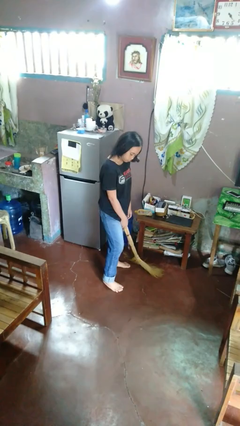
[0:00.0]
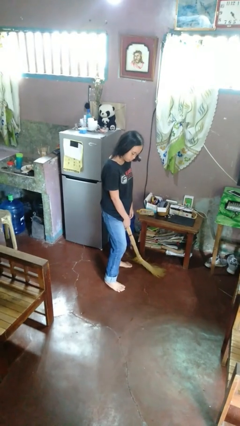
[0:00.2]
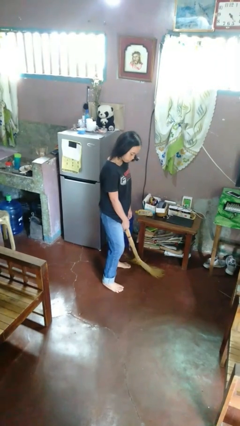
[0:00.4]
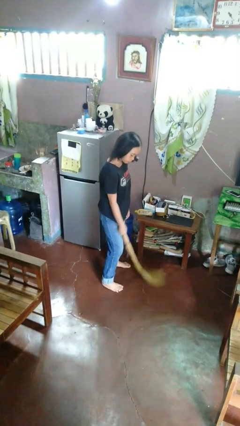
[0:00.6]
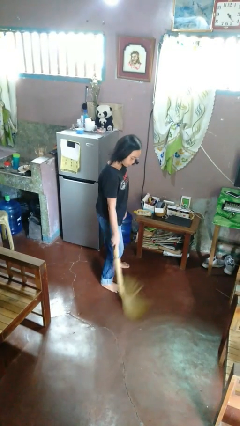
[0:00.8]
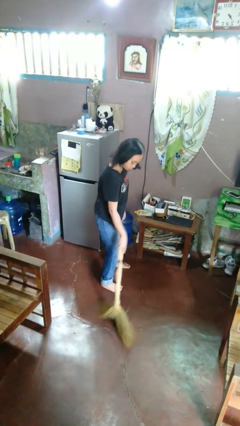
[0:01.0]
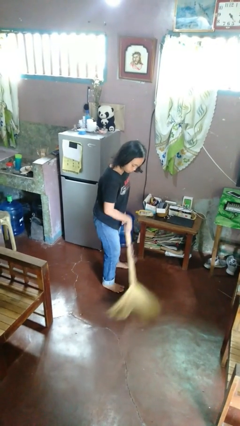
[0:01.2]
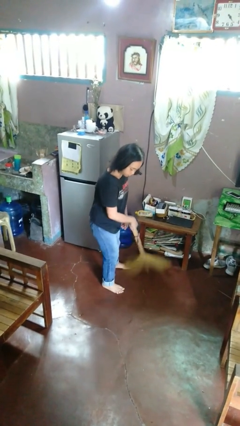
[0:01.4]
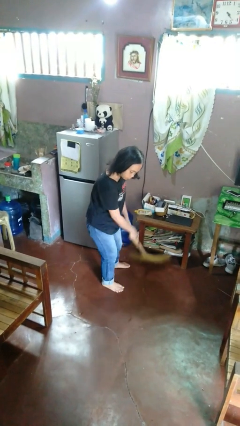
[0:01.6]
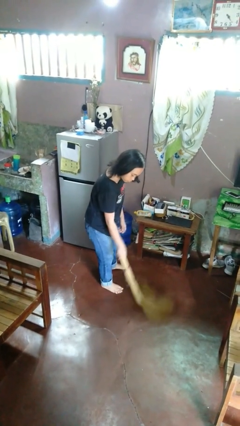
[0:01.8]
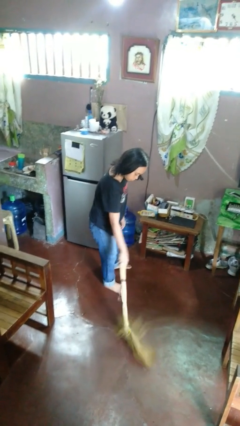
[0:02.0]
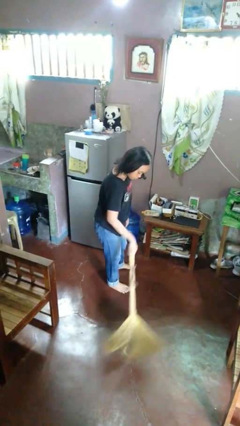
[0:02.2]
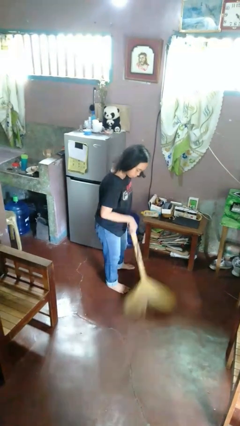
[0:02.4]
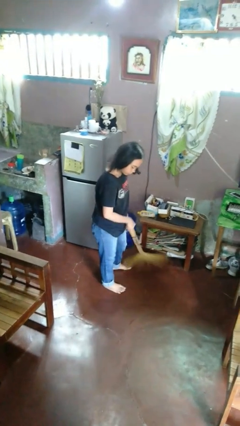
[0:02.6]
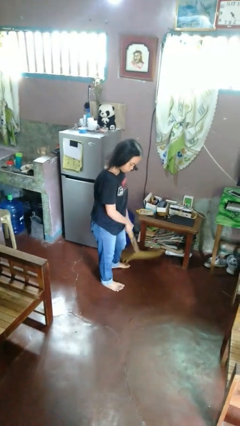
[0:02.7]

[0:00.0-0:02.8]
person sweeps floor

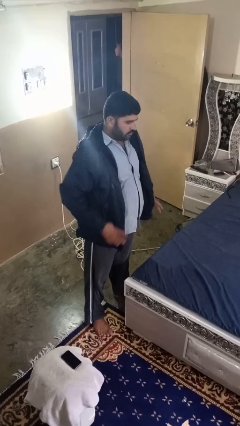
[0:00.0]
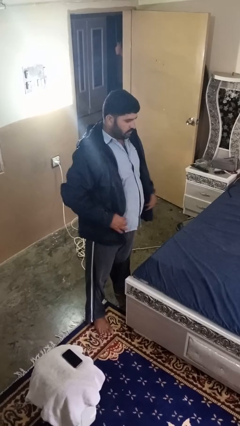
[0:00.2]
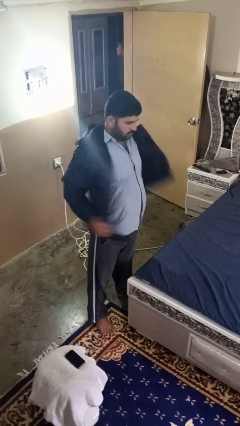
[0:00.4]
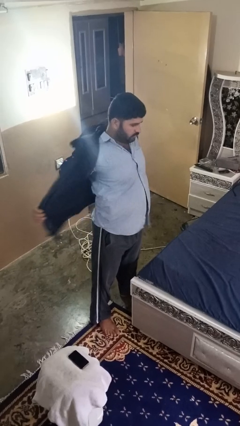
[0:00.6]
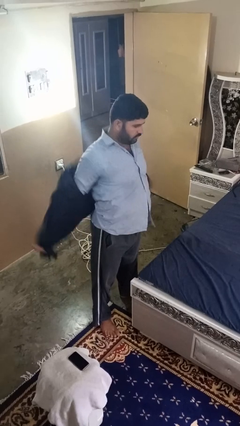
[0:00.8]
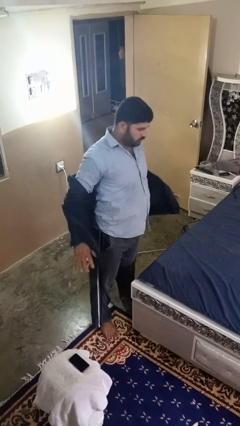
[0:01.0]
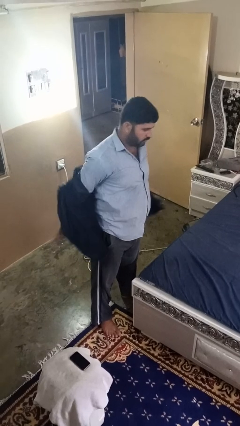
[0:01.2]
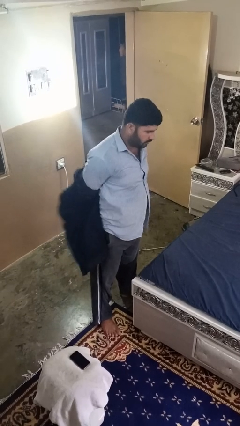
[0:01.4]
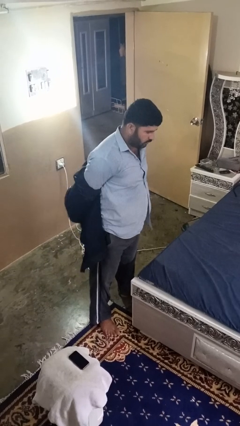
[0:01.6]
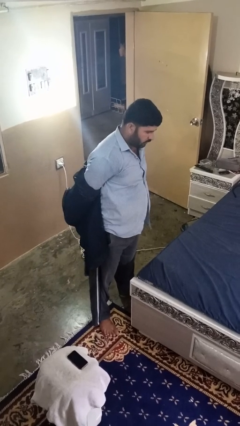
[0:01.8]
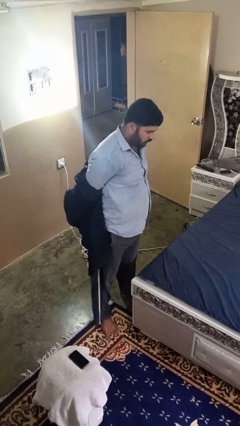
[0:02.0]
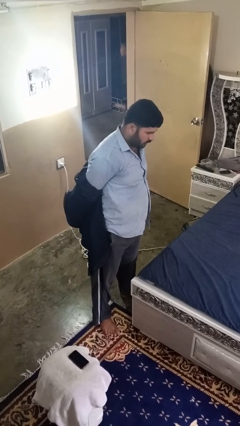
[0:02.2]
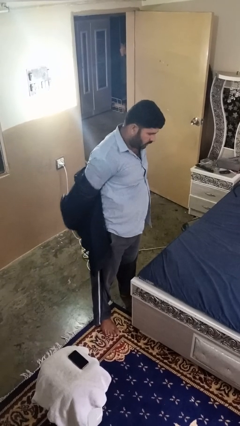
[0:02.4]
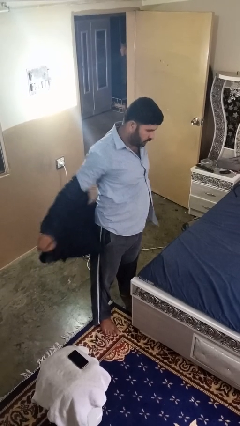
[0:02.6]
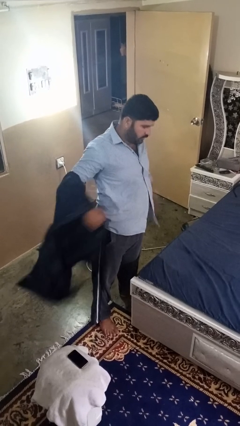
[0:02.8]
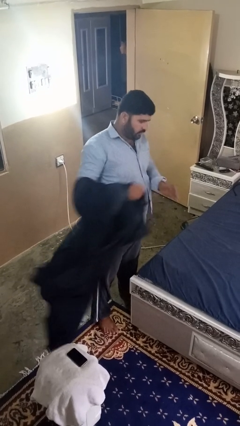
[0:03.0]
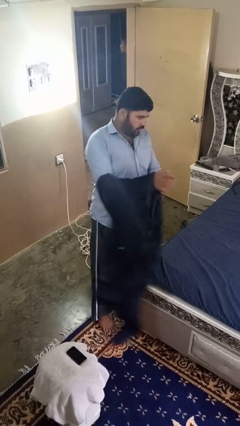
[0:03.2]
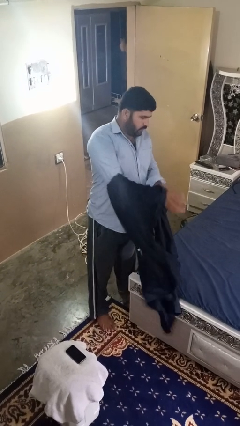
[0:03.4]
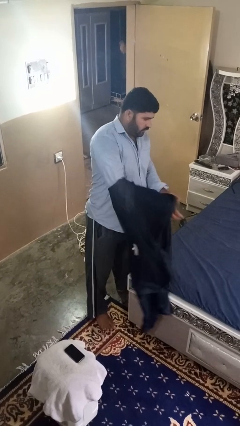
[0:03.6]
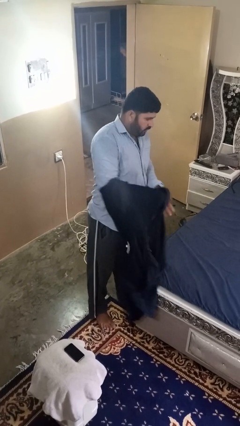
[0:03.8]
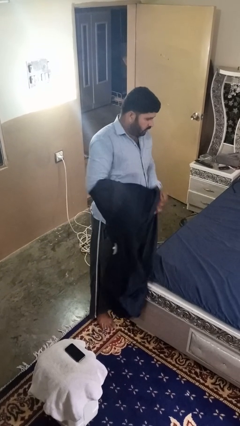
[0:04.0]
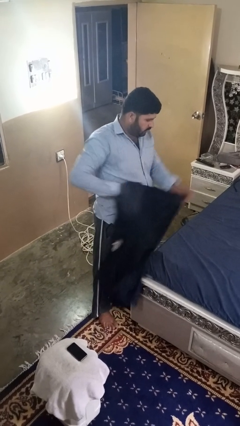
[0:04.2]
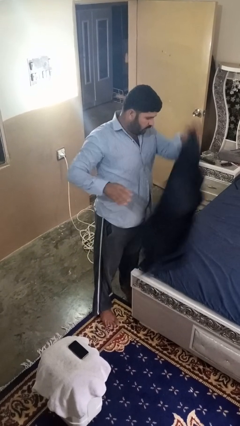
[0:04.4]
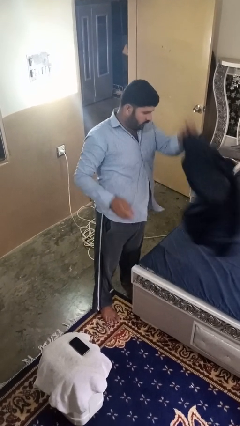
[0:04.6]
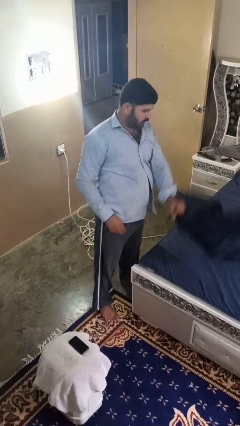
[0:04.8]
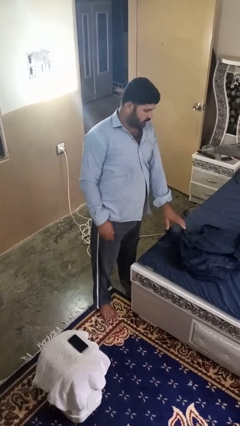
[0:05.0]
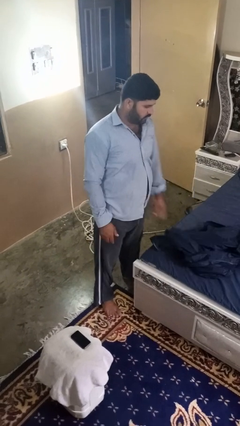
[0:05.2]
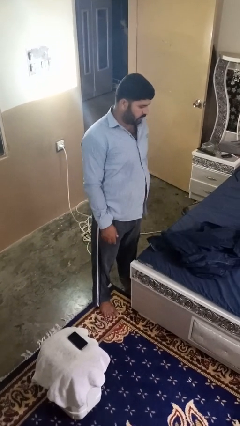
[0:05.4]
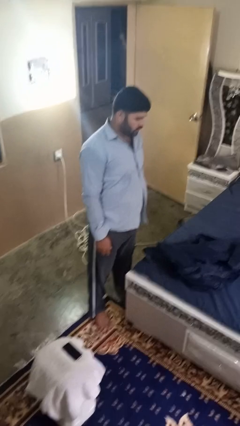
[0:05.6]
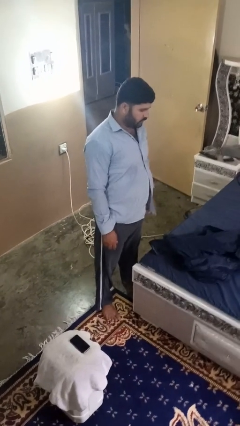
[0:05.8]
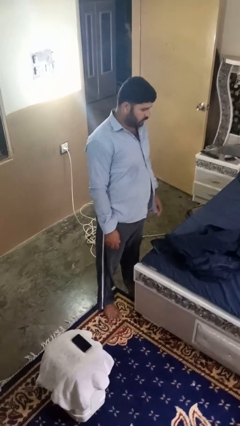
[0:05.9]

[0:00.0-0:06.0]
person takes off jacket

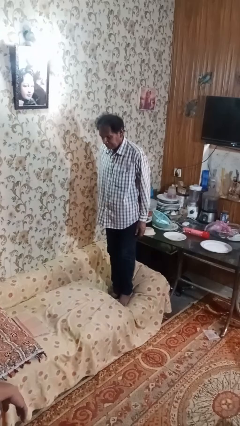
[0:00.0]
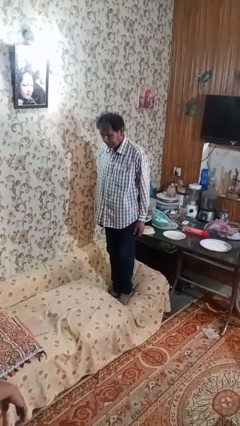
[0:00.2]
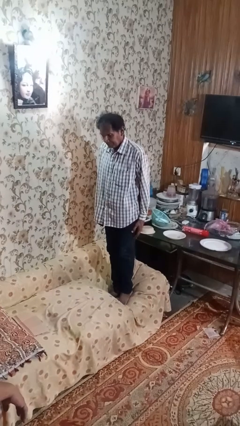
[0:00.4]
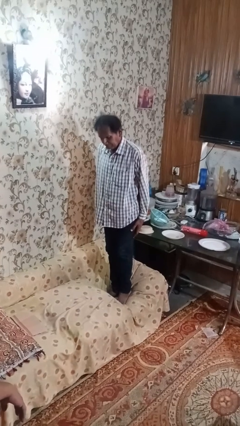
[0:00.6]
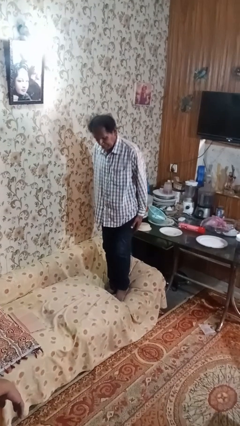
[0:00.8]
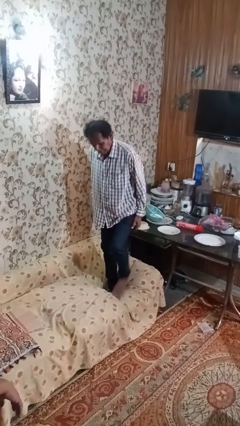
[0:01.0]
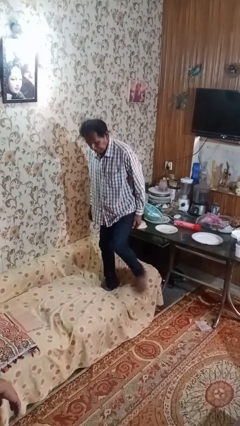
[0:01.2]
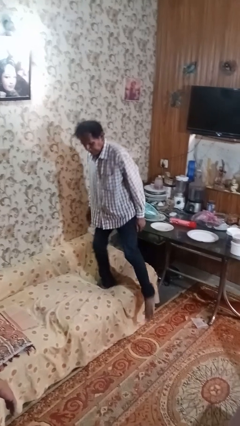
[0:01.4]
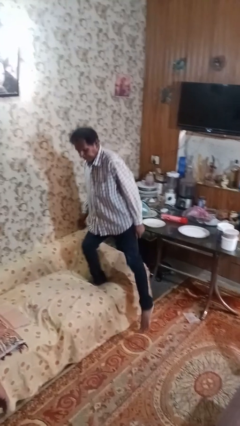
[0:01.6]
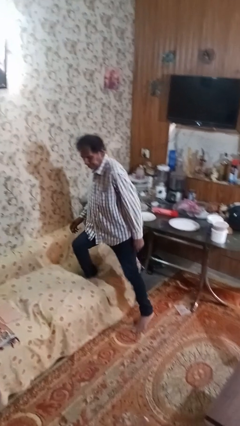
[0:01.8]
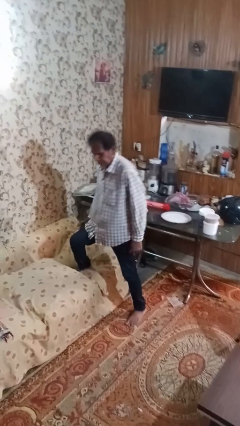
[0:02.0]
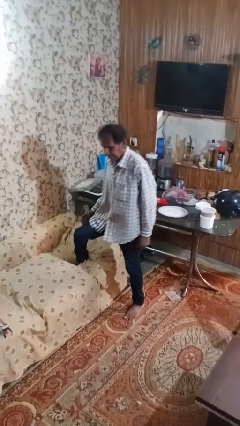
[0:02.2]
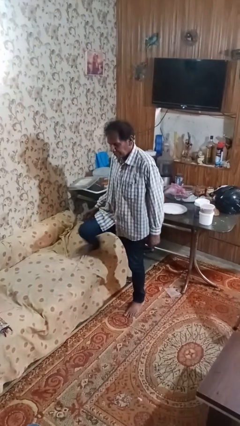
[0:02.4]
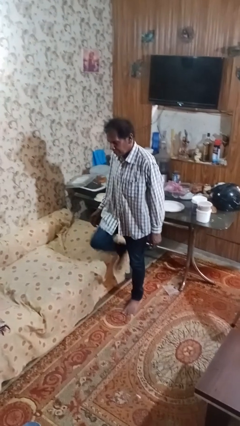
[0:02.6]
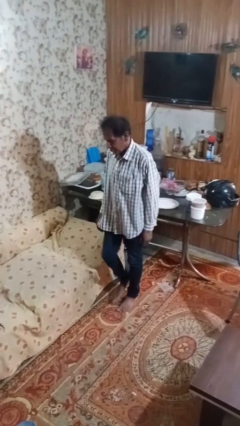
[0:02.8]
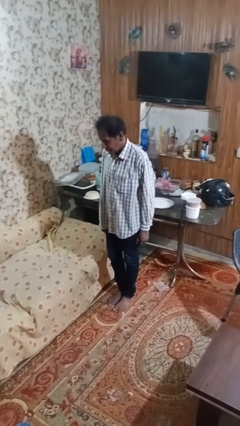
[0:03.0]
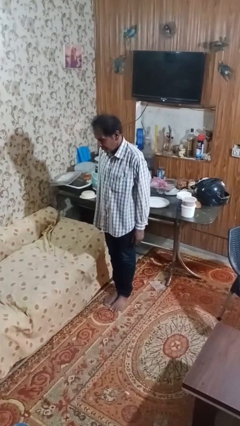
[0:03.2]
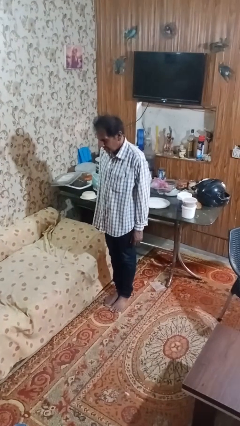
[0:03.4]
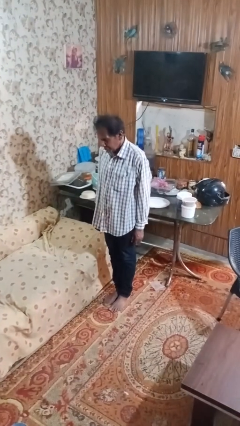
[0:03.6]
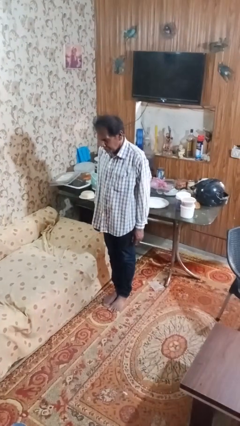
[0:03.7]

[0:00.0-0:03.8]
person climbs off couch

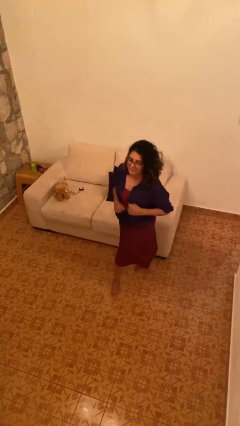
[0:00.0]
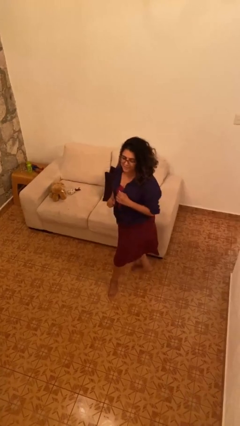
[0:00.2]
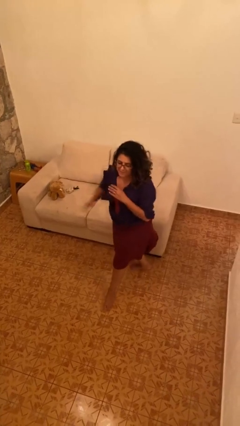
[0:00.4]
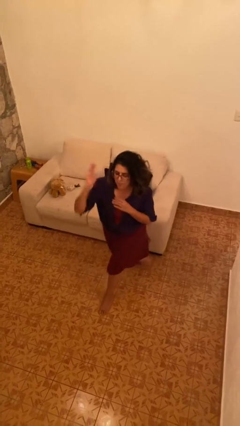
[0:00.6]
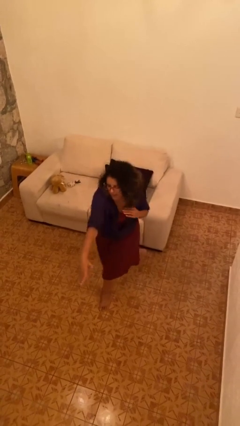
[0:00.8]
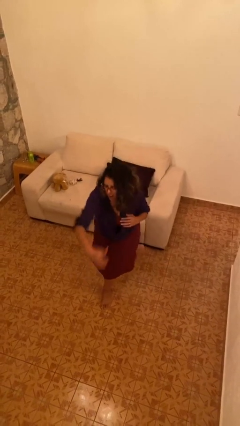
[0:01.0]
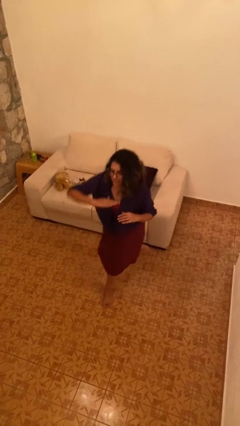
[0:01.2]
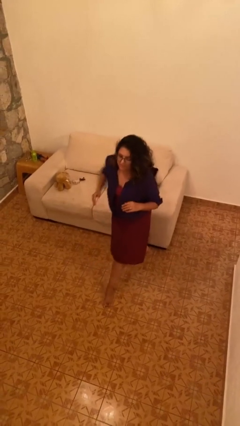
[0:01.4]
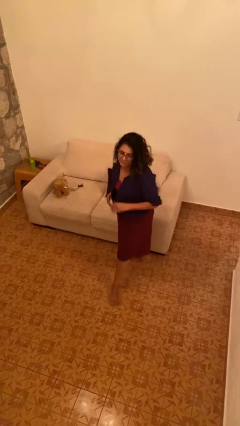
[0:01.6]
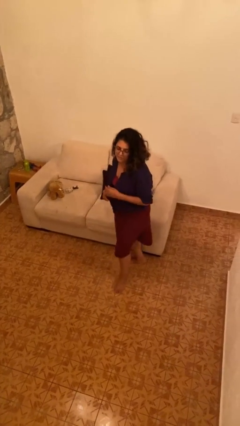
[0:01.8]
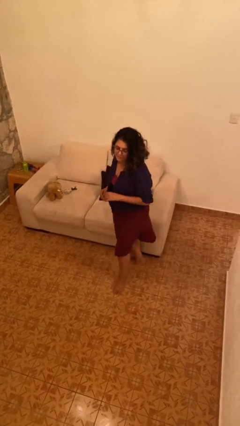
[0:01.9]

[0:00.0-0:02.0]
person karate chop

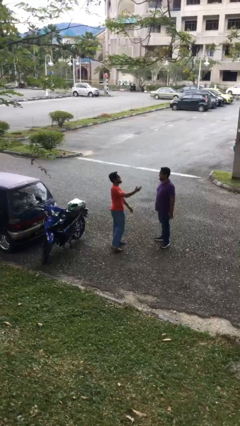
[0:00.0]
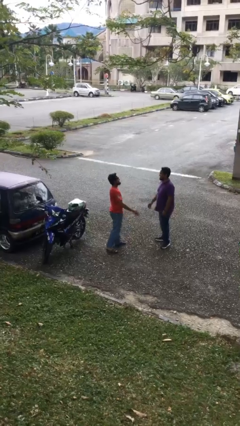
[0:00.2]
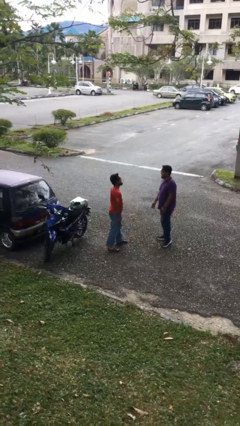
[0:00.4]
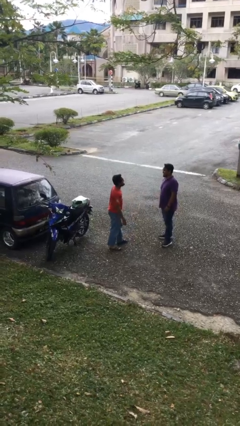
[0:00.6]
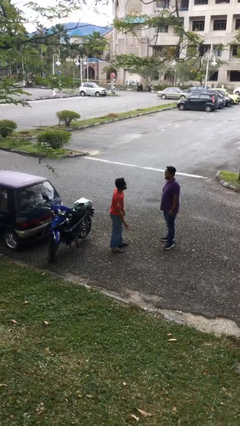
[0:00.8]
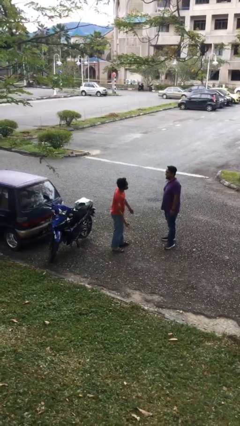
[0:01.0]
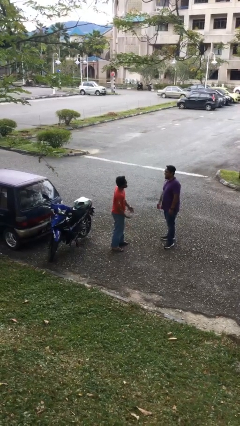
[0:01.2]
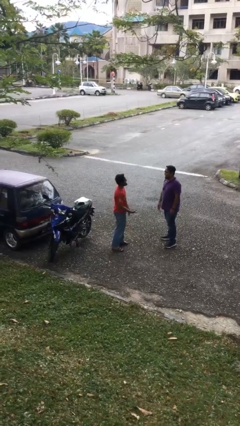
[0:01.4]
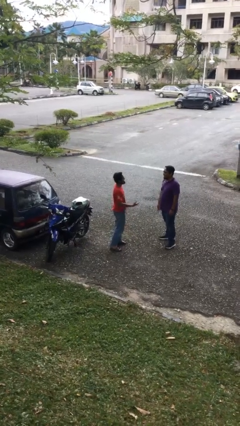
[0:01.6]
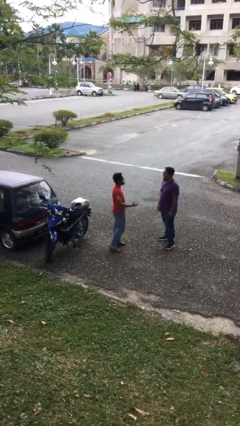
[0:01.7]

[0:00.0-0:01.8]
person talks to person

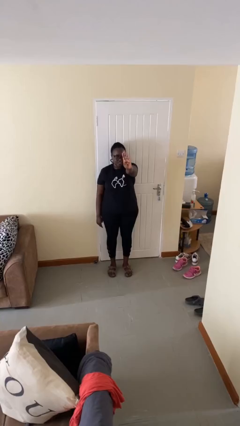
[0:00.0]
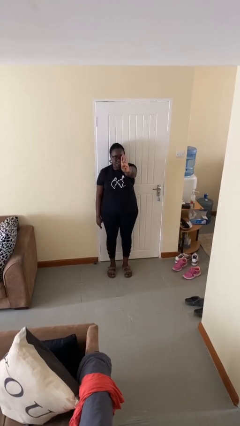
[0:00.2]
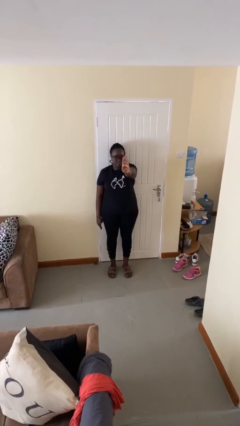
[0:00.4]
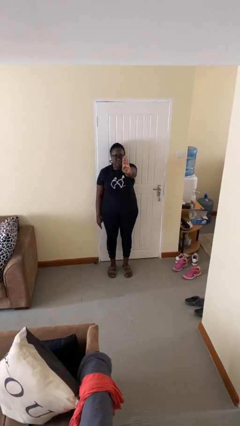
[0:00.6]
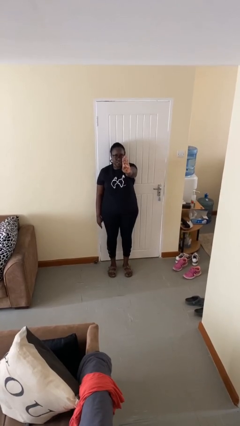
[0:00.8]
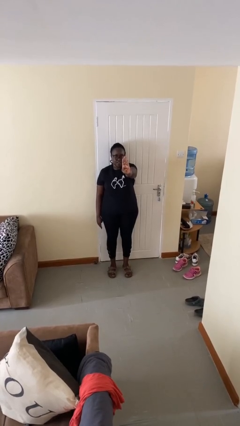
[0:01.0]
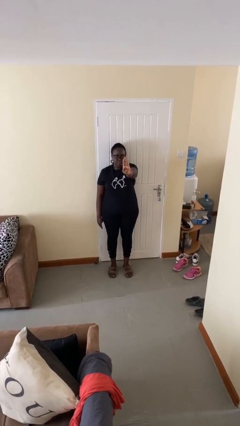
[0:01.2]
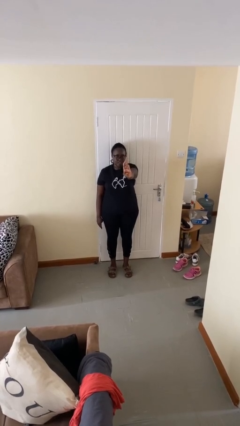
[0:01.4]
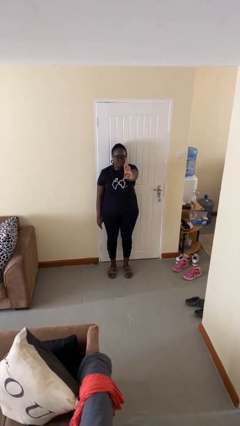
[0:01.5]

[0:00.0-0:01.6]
person gestures number four
